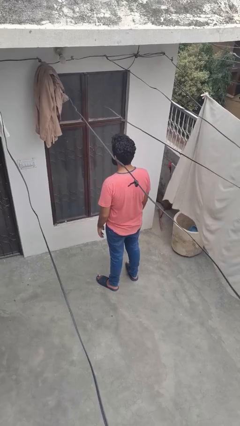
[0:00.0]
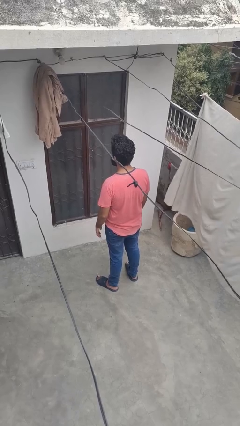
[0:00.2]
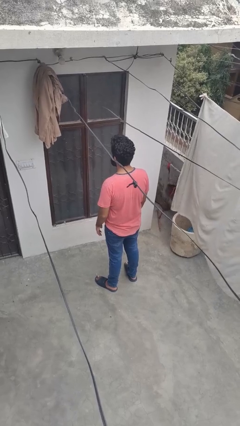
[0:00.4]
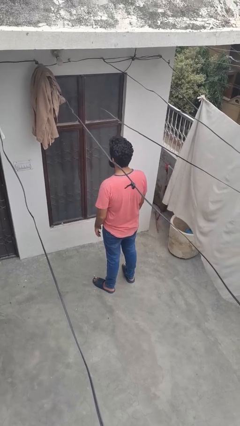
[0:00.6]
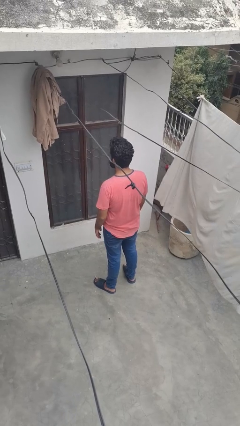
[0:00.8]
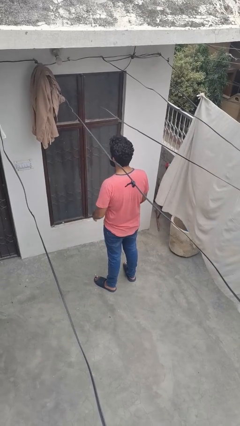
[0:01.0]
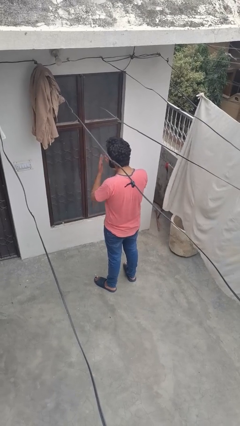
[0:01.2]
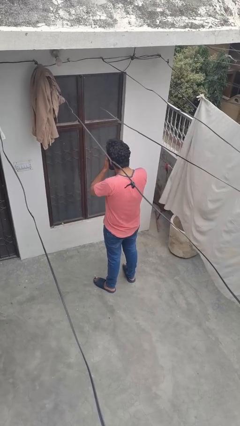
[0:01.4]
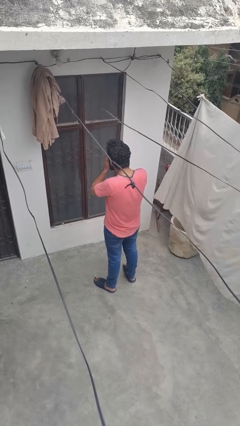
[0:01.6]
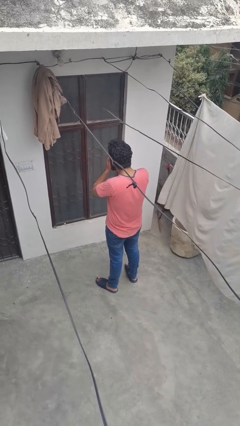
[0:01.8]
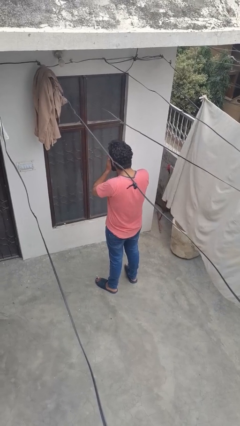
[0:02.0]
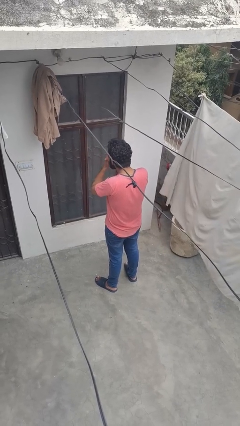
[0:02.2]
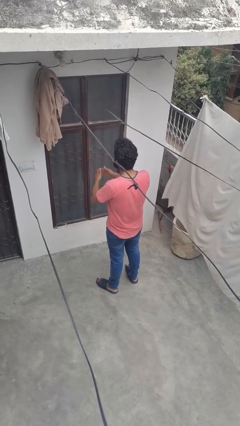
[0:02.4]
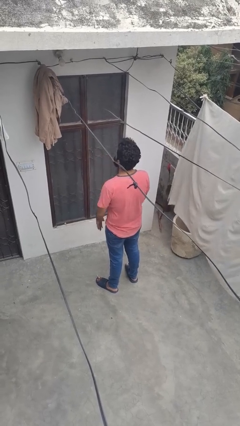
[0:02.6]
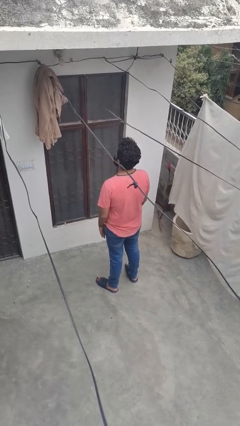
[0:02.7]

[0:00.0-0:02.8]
person covers face with hands

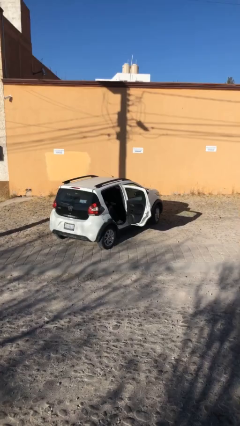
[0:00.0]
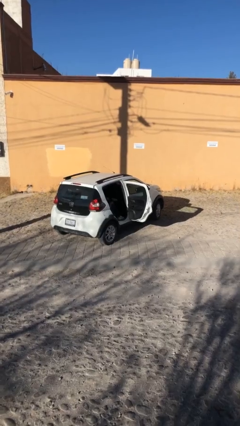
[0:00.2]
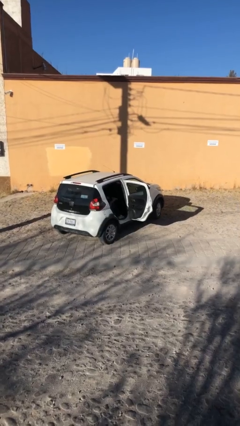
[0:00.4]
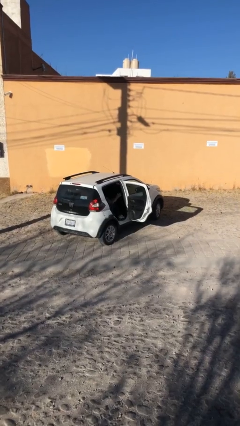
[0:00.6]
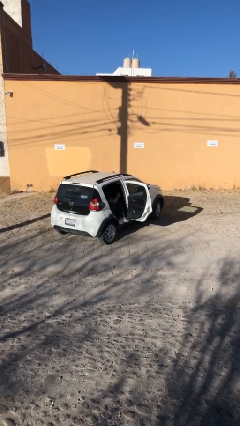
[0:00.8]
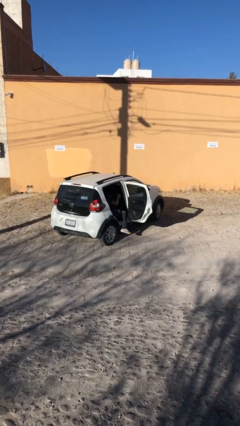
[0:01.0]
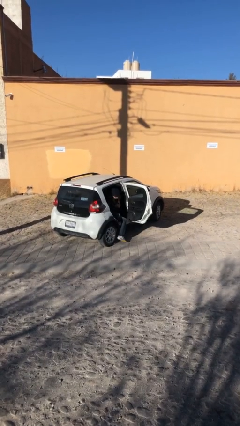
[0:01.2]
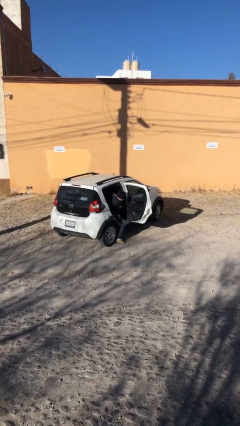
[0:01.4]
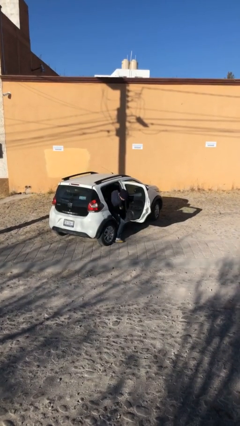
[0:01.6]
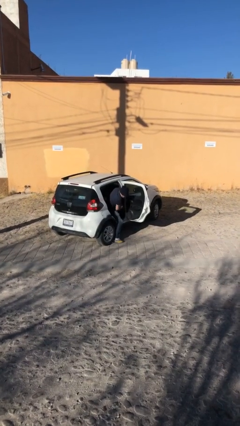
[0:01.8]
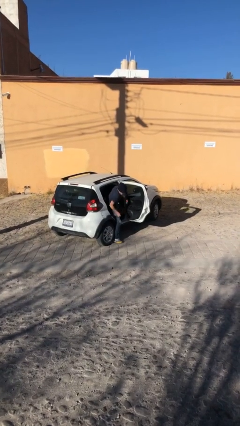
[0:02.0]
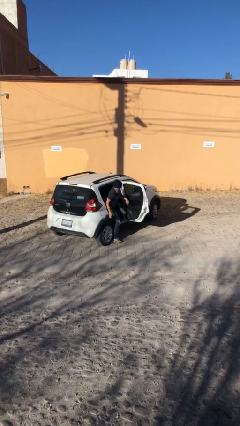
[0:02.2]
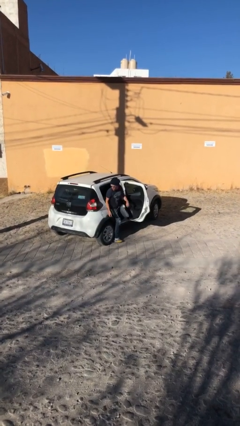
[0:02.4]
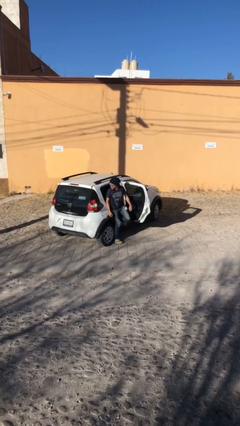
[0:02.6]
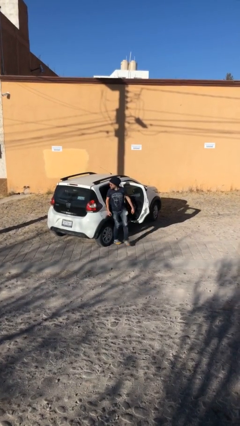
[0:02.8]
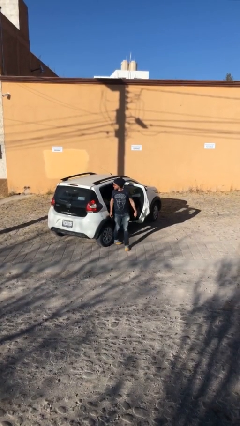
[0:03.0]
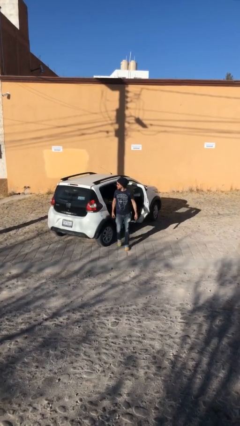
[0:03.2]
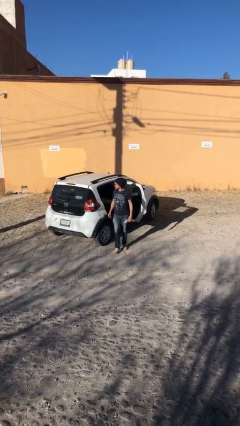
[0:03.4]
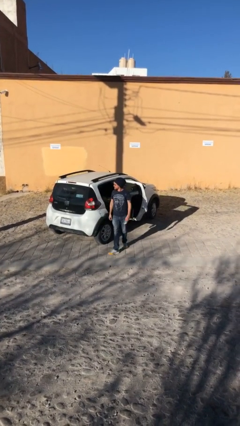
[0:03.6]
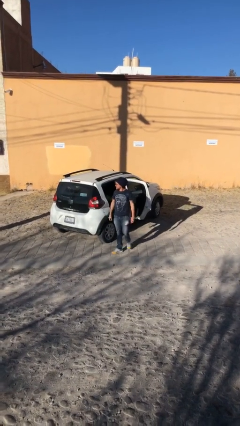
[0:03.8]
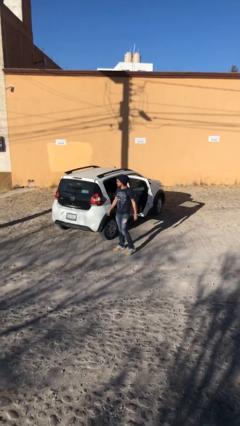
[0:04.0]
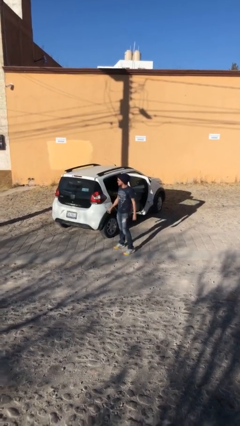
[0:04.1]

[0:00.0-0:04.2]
person exits car

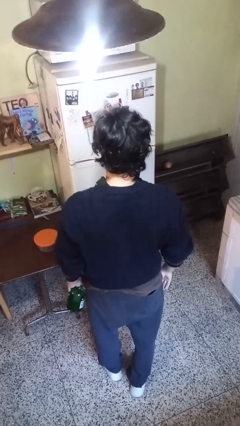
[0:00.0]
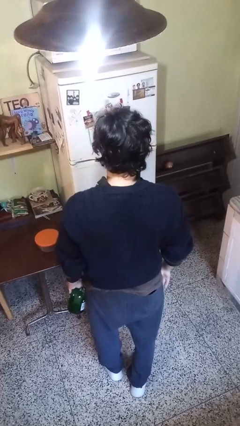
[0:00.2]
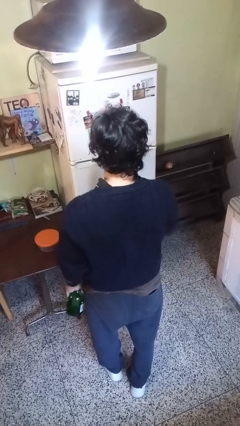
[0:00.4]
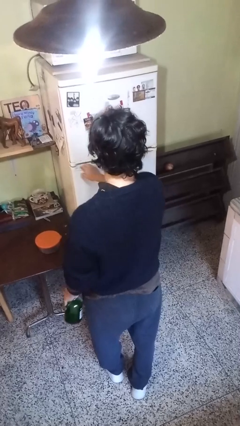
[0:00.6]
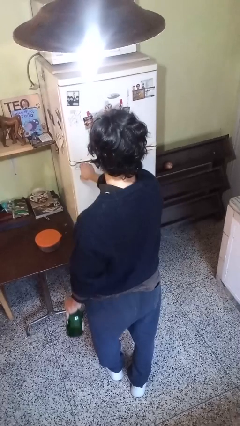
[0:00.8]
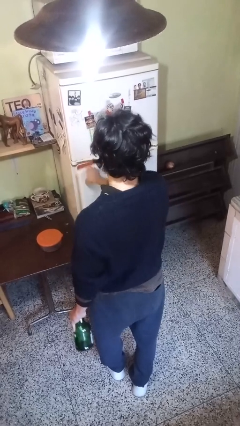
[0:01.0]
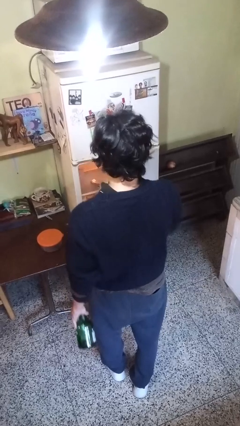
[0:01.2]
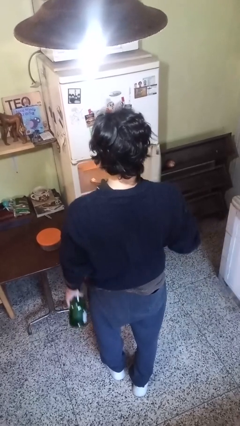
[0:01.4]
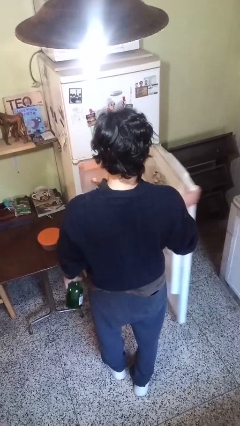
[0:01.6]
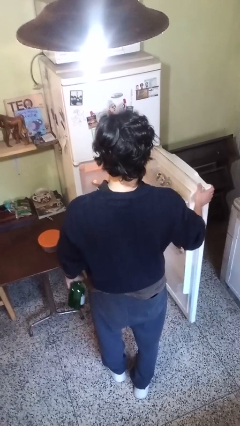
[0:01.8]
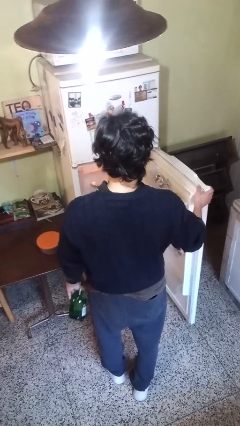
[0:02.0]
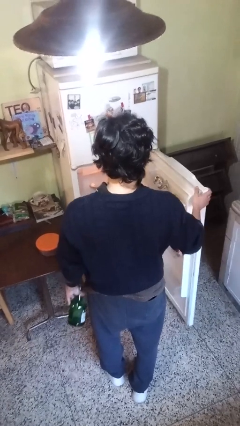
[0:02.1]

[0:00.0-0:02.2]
person opens refrigerator

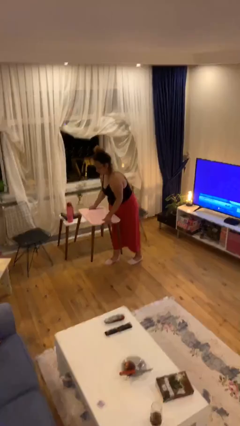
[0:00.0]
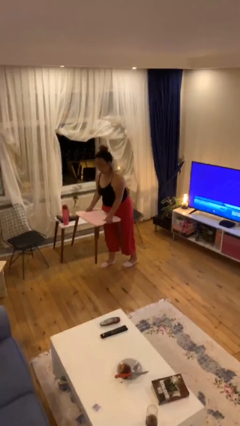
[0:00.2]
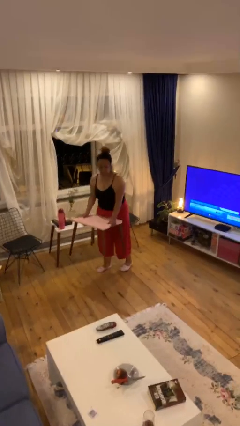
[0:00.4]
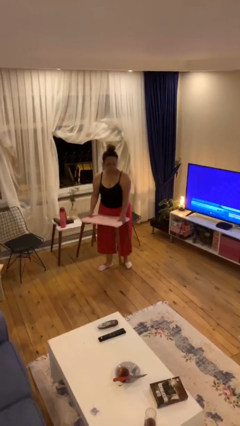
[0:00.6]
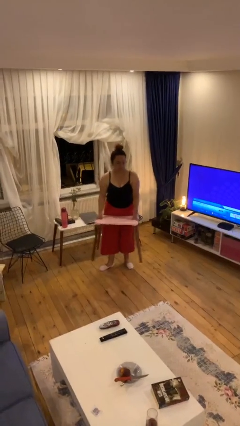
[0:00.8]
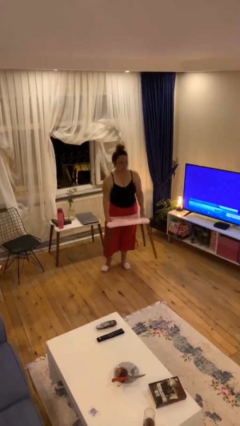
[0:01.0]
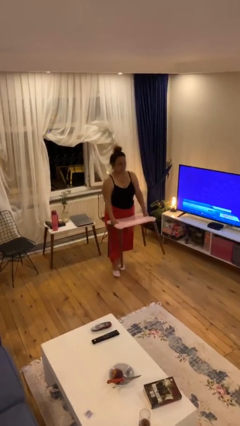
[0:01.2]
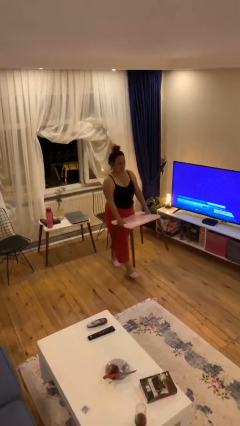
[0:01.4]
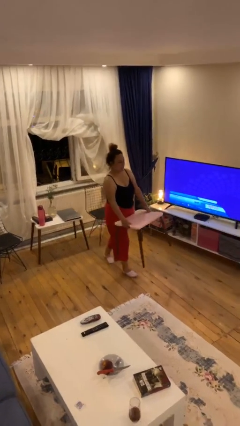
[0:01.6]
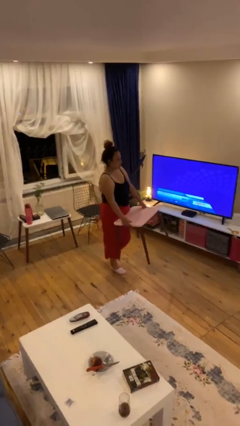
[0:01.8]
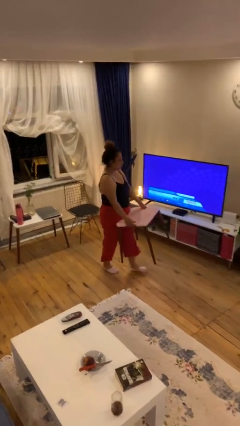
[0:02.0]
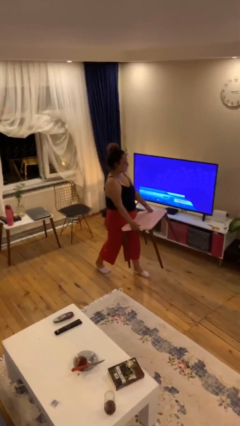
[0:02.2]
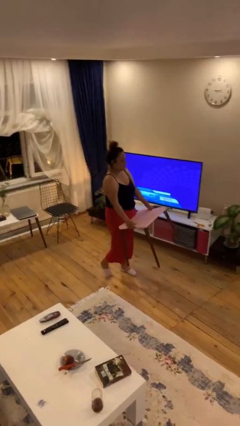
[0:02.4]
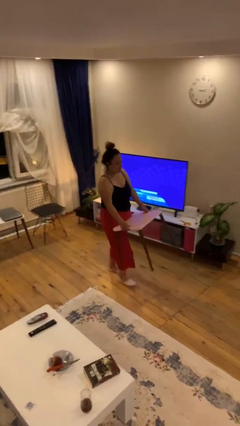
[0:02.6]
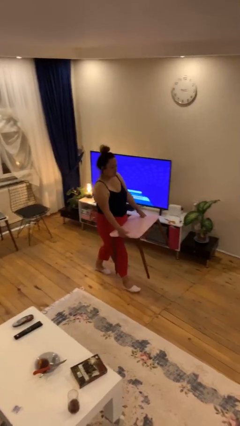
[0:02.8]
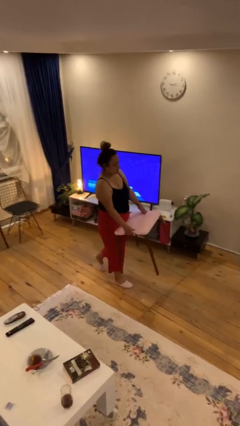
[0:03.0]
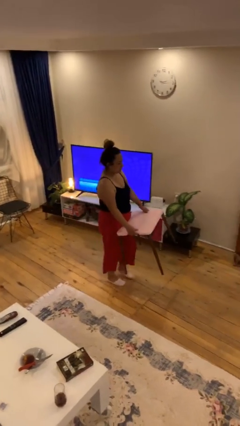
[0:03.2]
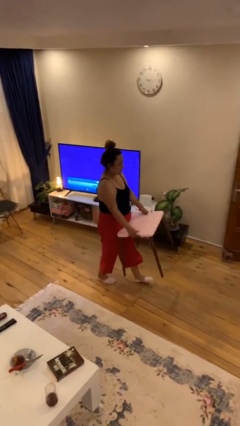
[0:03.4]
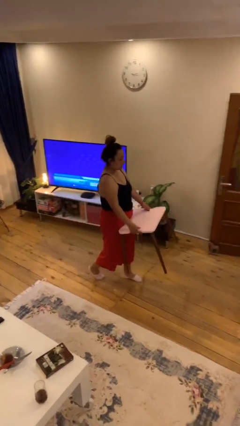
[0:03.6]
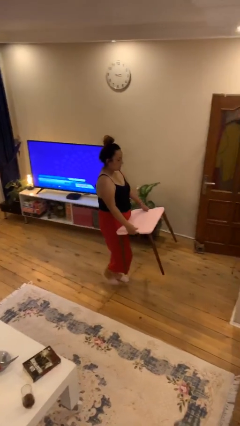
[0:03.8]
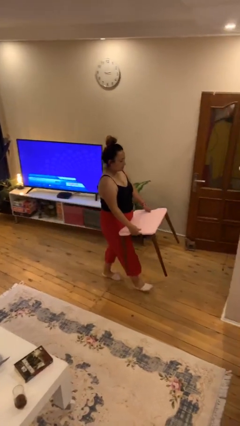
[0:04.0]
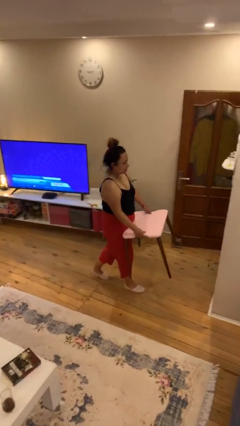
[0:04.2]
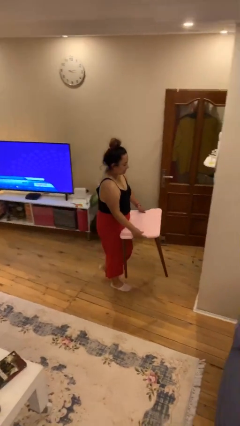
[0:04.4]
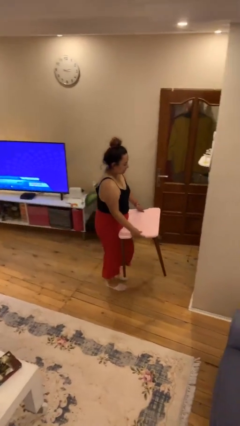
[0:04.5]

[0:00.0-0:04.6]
person carries heavy object

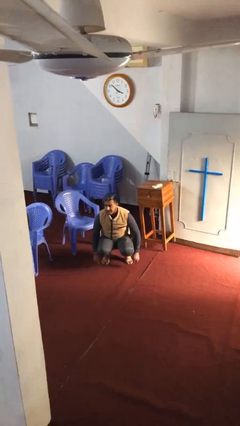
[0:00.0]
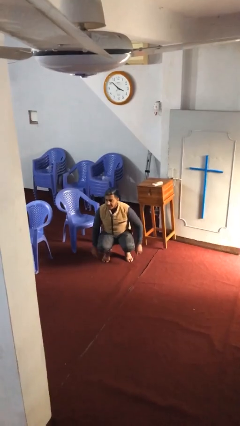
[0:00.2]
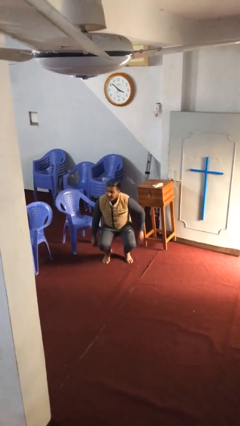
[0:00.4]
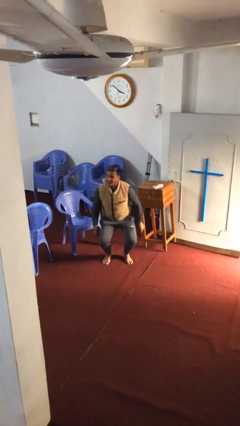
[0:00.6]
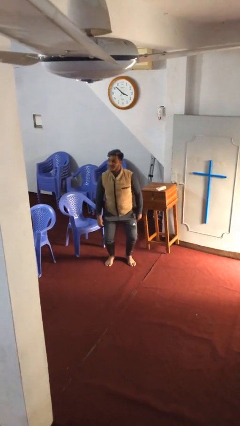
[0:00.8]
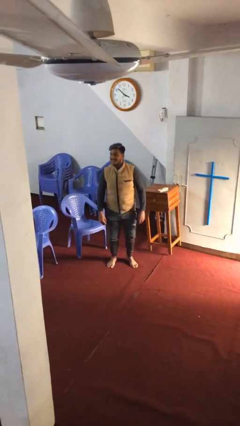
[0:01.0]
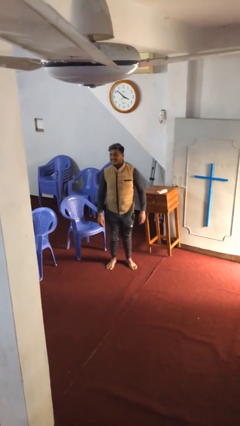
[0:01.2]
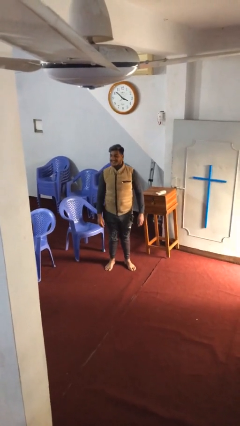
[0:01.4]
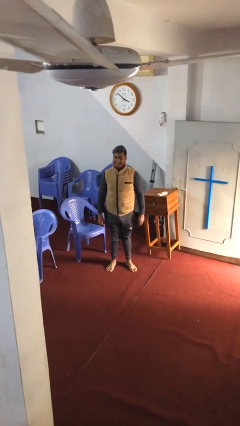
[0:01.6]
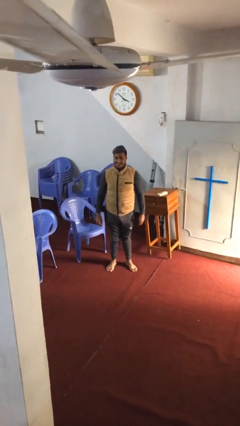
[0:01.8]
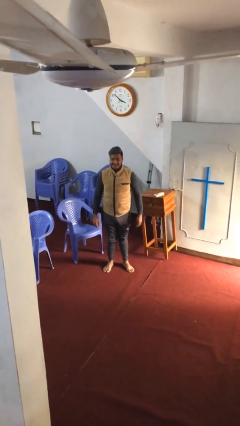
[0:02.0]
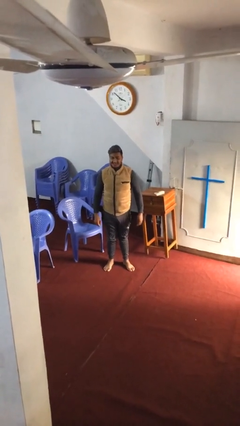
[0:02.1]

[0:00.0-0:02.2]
person stands up

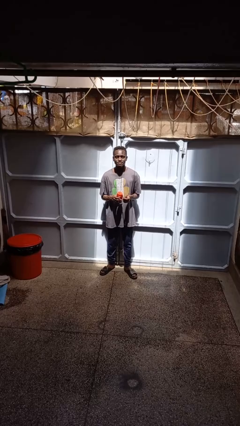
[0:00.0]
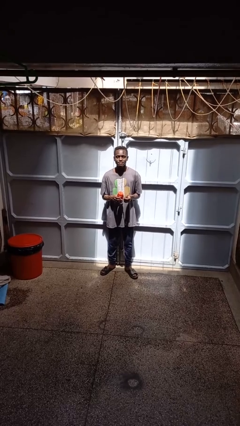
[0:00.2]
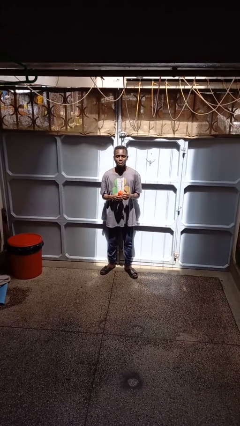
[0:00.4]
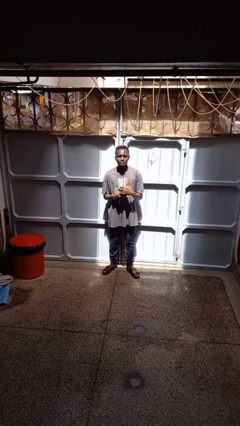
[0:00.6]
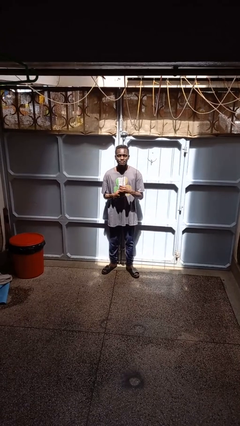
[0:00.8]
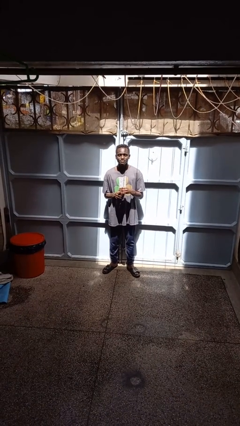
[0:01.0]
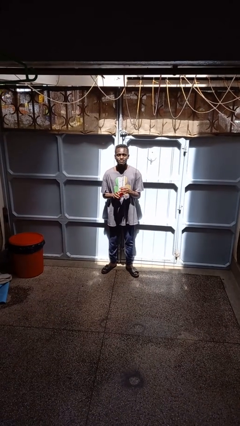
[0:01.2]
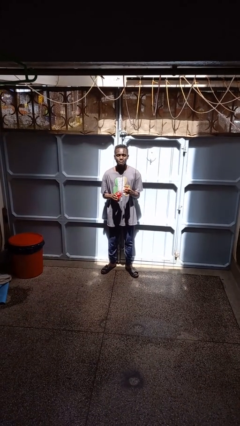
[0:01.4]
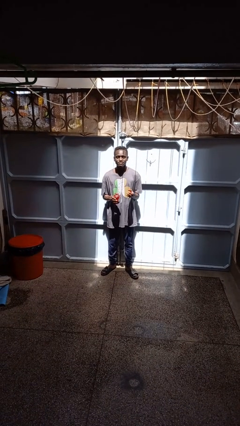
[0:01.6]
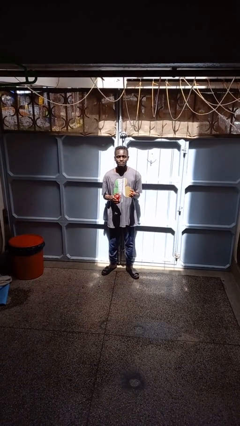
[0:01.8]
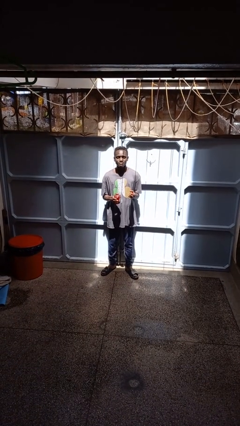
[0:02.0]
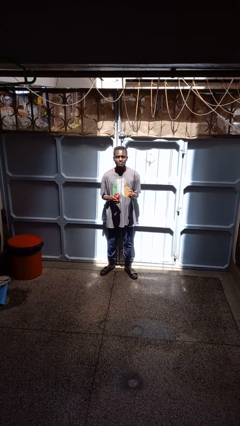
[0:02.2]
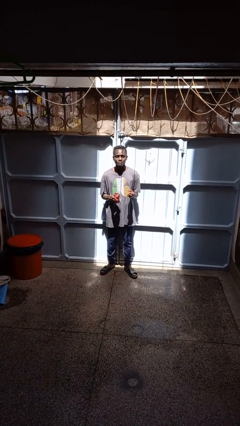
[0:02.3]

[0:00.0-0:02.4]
person opens jar
